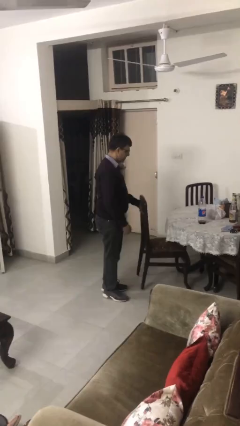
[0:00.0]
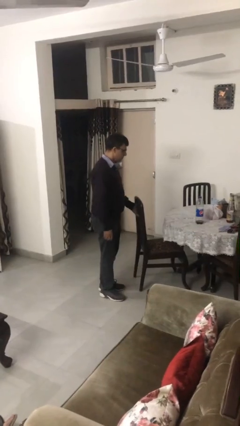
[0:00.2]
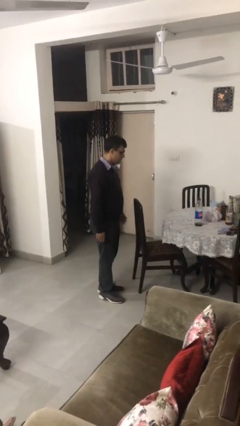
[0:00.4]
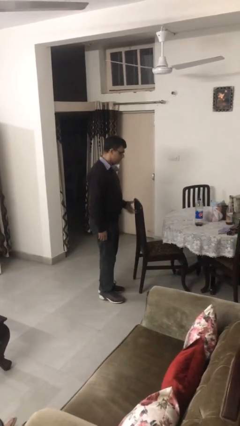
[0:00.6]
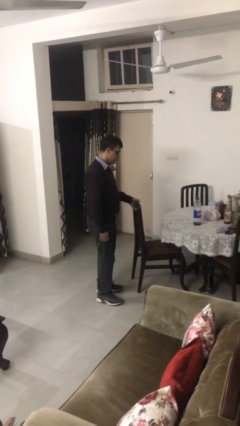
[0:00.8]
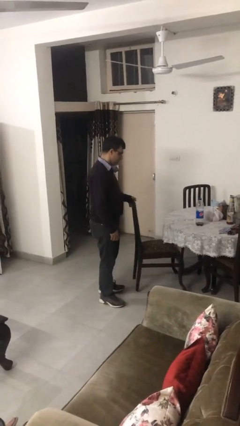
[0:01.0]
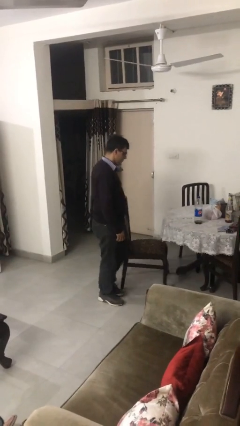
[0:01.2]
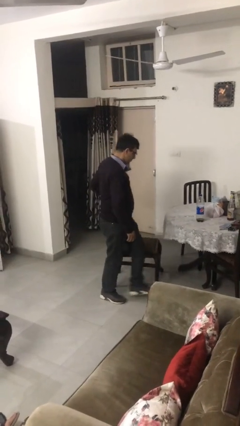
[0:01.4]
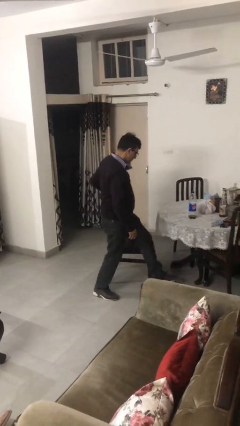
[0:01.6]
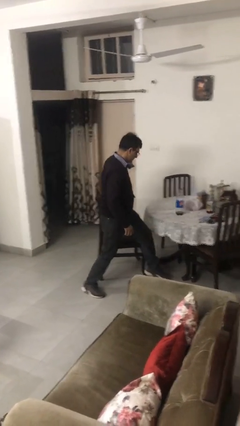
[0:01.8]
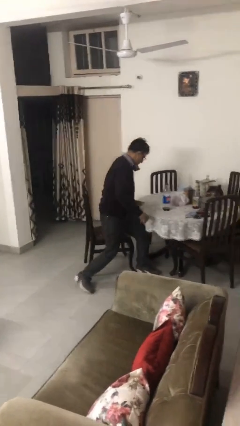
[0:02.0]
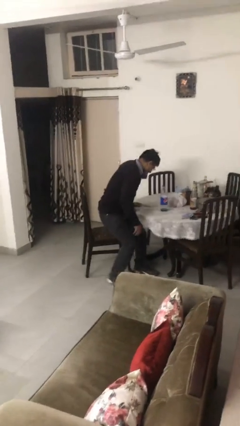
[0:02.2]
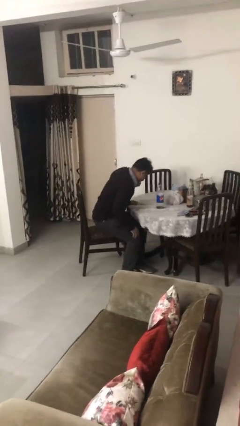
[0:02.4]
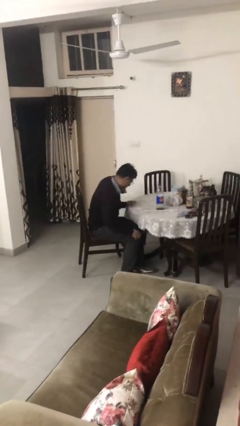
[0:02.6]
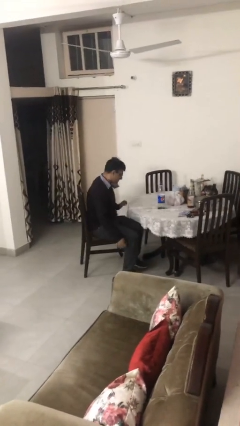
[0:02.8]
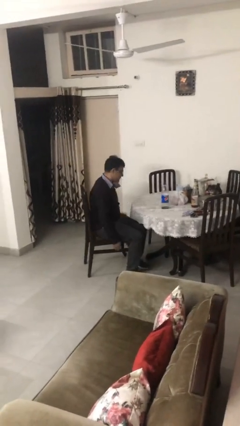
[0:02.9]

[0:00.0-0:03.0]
person sits down

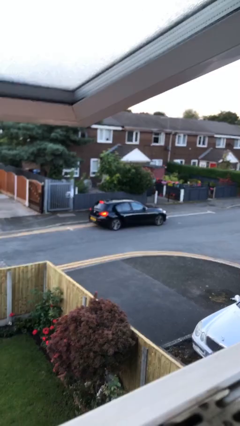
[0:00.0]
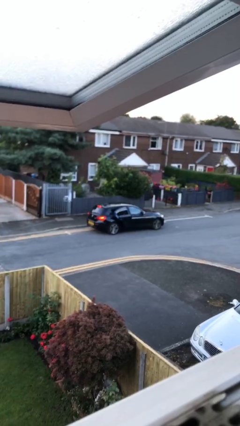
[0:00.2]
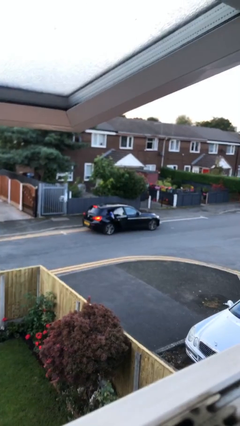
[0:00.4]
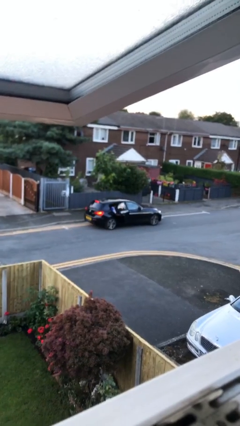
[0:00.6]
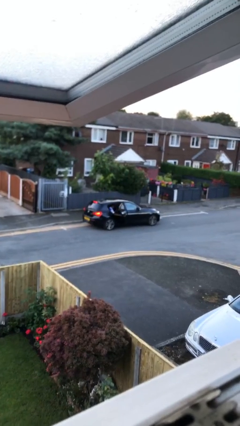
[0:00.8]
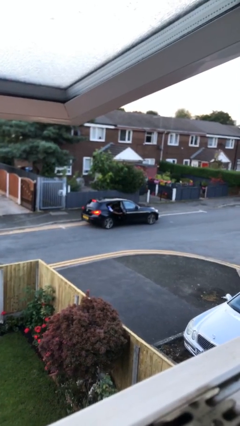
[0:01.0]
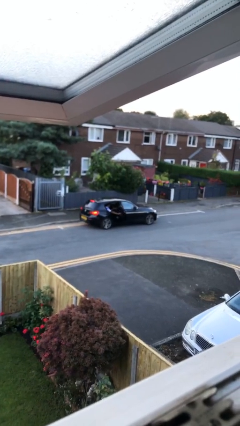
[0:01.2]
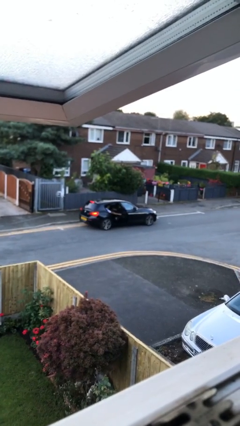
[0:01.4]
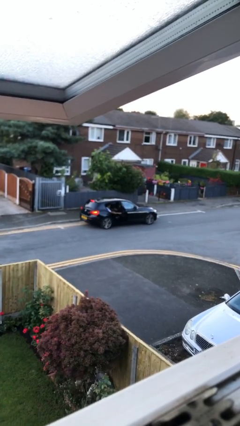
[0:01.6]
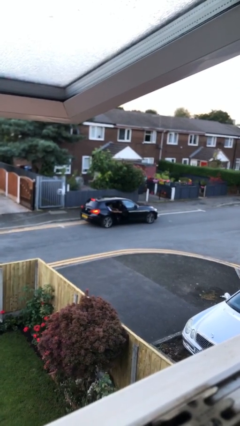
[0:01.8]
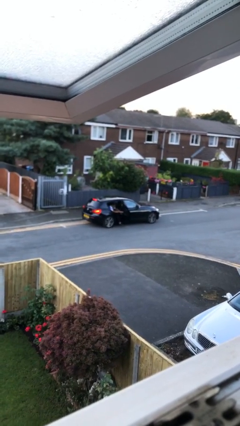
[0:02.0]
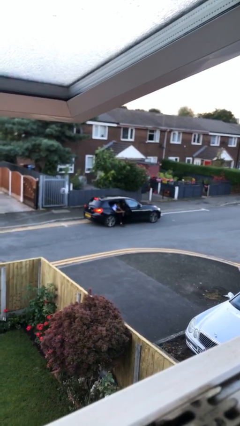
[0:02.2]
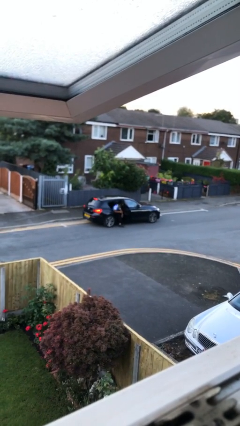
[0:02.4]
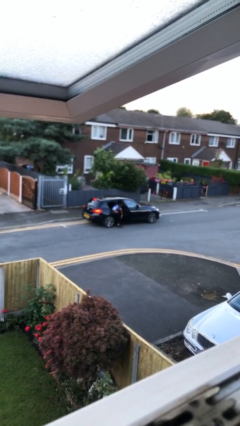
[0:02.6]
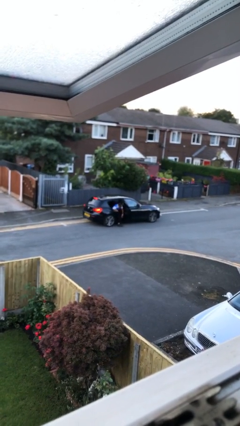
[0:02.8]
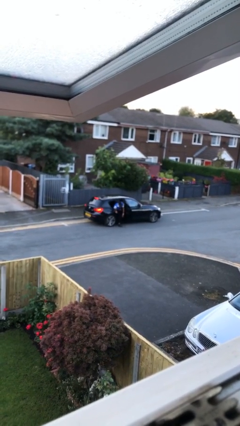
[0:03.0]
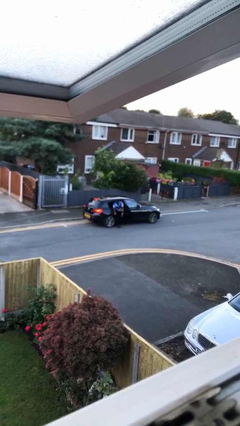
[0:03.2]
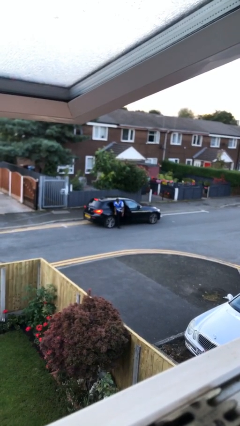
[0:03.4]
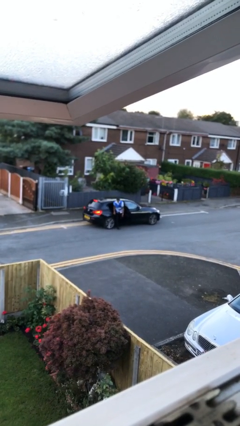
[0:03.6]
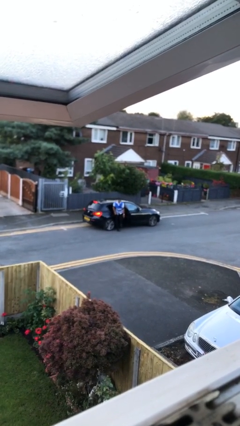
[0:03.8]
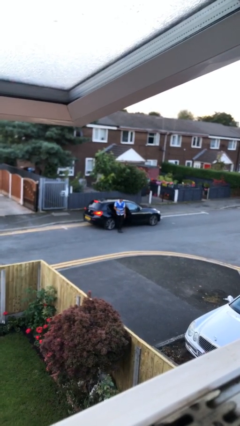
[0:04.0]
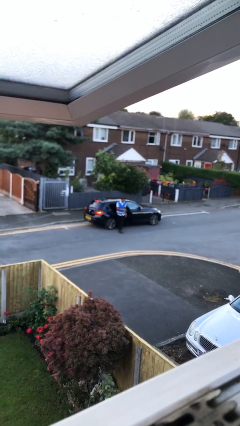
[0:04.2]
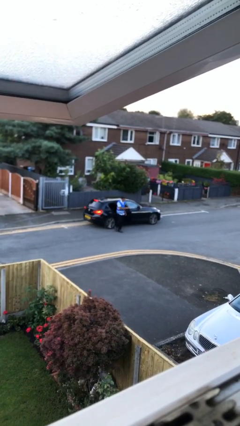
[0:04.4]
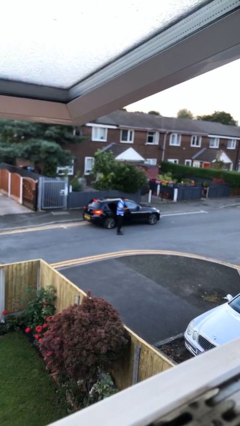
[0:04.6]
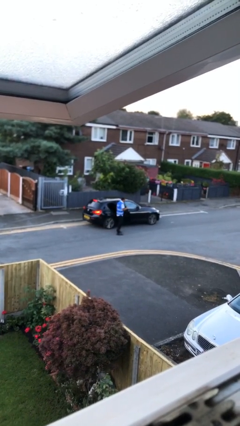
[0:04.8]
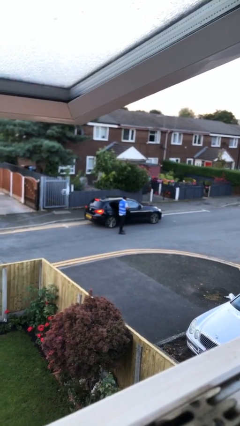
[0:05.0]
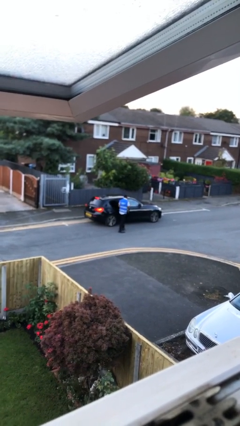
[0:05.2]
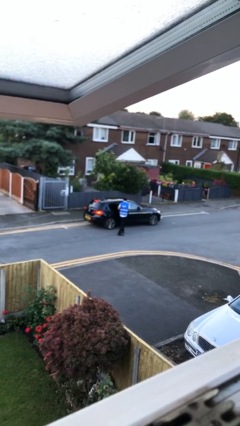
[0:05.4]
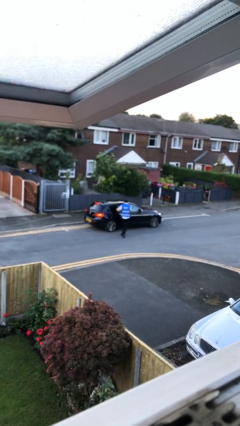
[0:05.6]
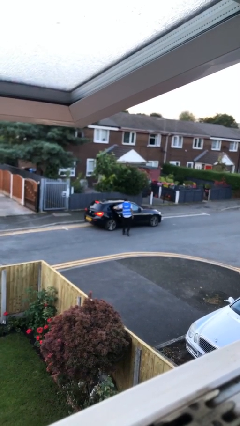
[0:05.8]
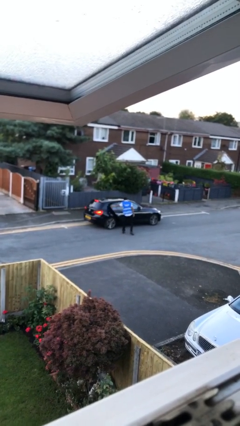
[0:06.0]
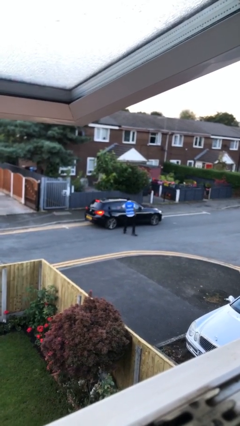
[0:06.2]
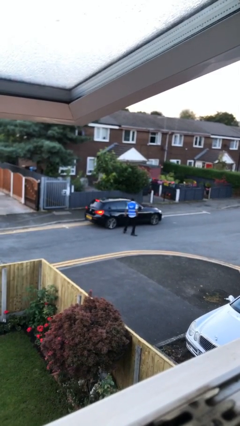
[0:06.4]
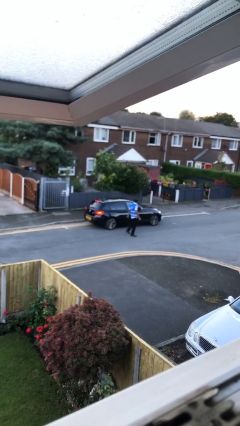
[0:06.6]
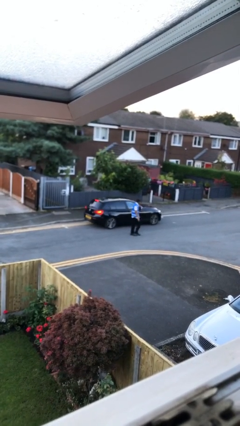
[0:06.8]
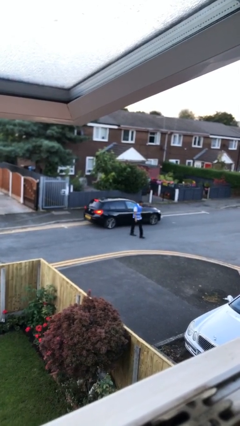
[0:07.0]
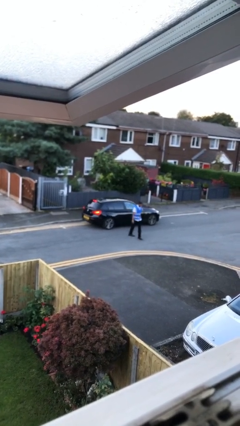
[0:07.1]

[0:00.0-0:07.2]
car drops off person

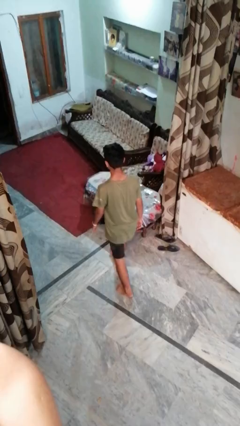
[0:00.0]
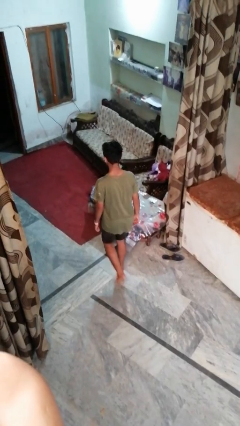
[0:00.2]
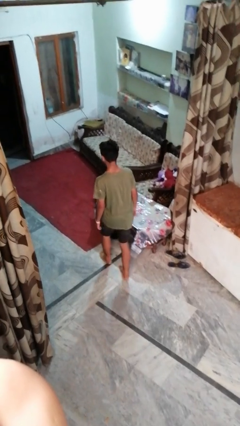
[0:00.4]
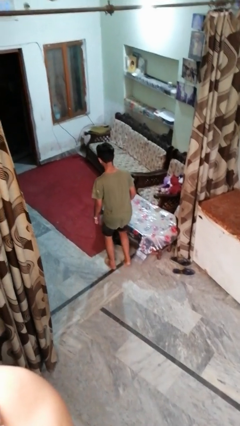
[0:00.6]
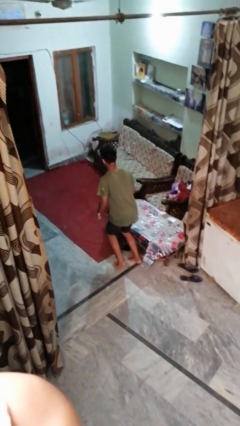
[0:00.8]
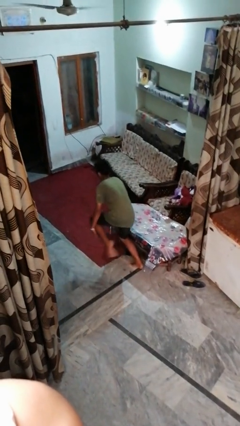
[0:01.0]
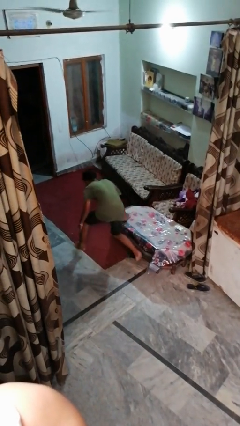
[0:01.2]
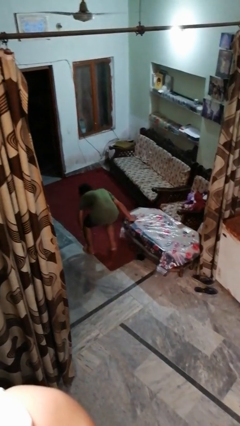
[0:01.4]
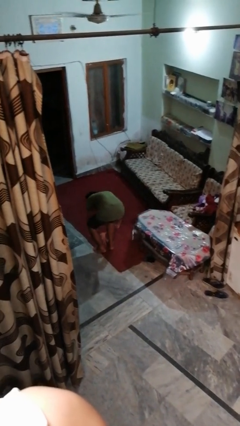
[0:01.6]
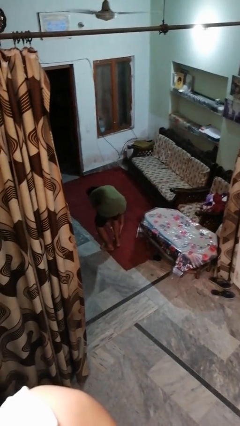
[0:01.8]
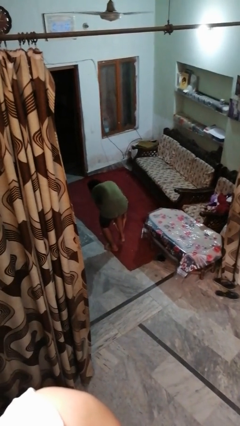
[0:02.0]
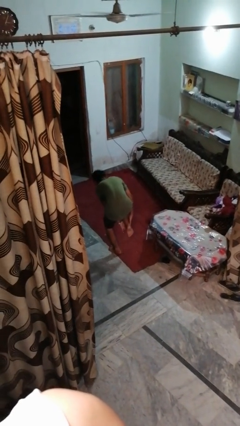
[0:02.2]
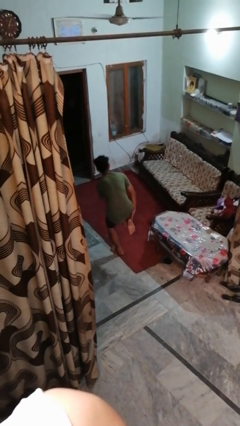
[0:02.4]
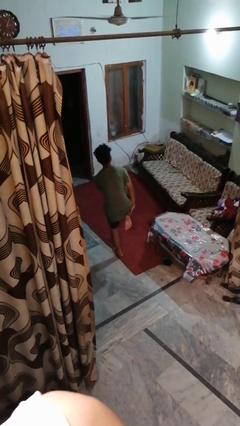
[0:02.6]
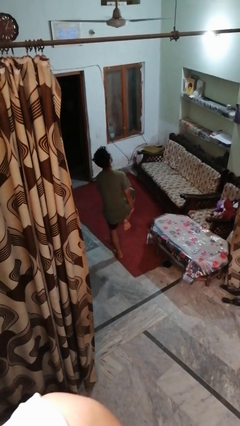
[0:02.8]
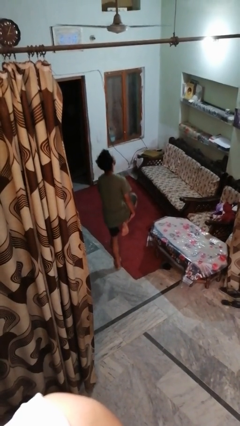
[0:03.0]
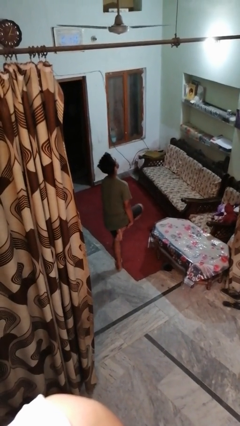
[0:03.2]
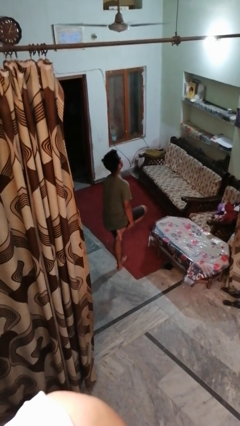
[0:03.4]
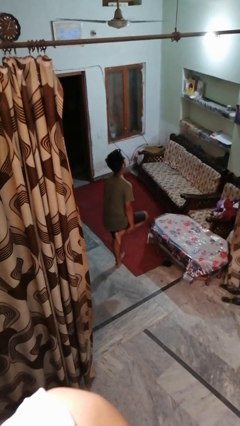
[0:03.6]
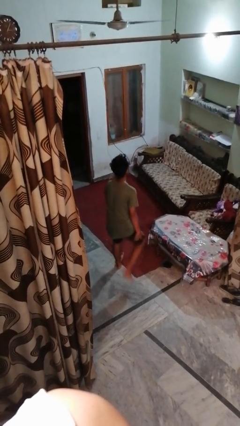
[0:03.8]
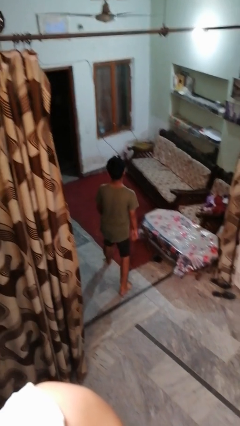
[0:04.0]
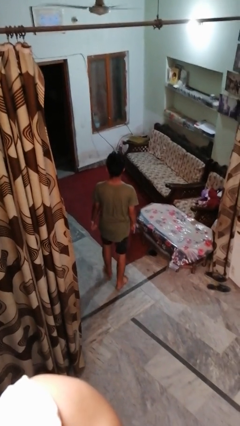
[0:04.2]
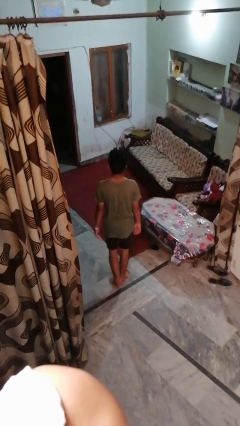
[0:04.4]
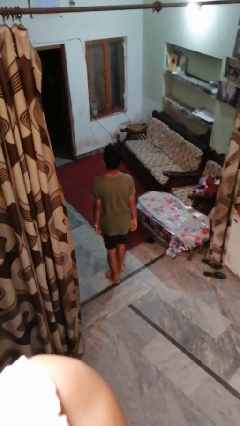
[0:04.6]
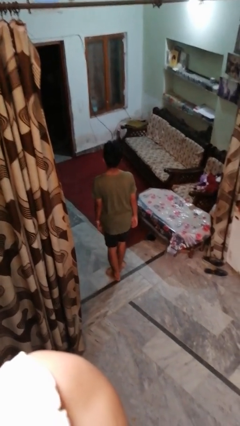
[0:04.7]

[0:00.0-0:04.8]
person stubs toe

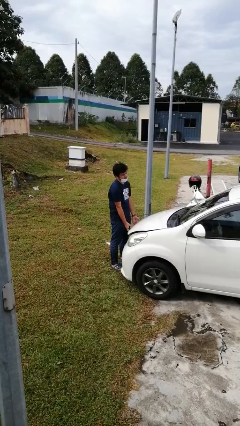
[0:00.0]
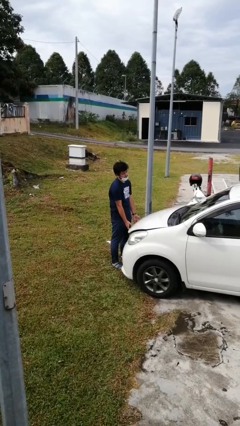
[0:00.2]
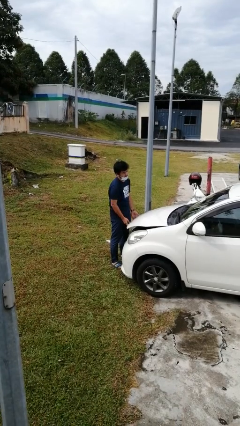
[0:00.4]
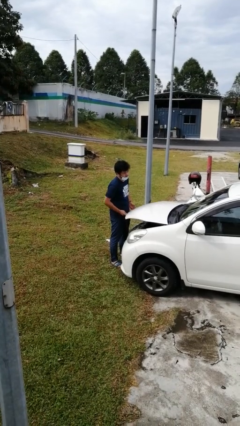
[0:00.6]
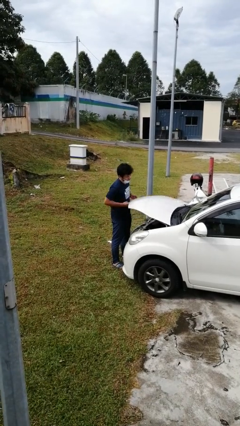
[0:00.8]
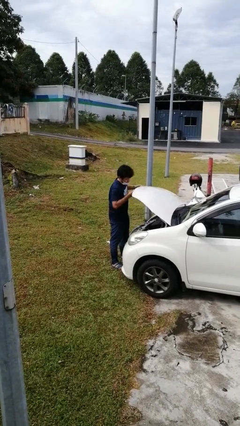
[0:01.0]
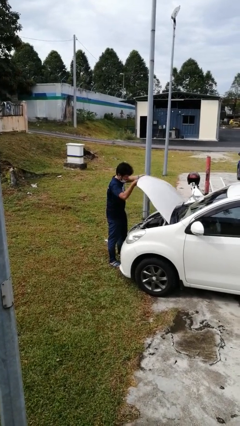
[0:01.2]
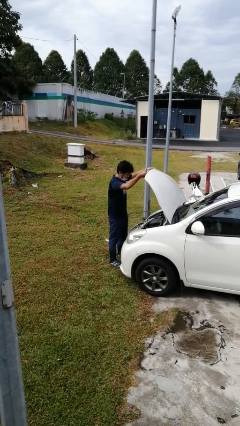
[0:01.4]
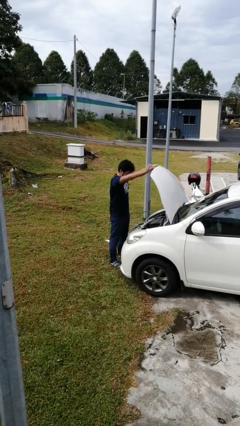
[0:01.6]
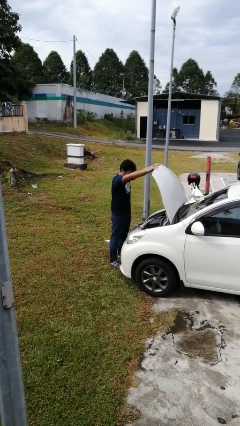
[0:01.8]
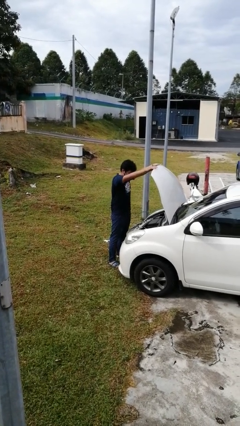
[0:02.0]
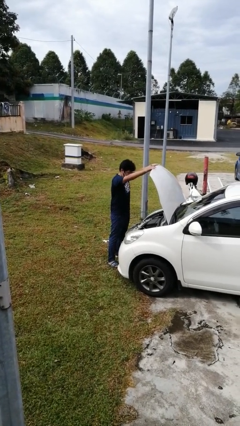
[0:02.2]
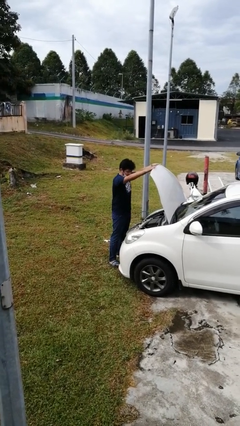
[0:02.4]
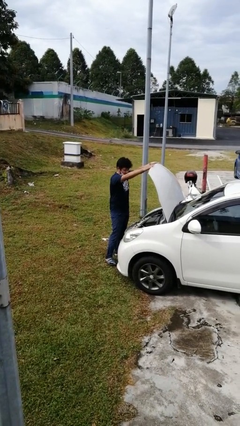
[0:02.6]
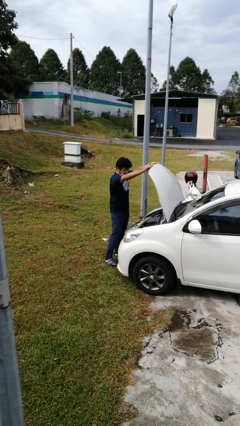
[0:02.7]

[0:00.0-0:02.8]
person opens car hood

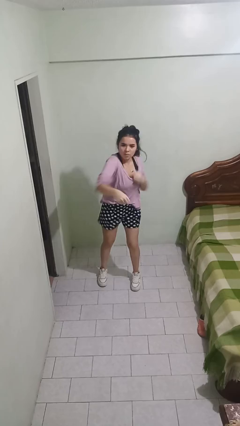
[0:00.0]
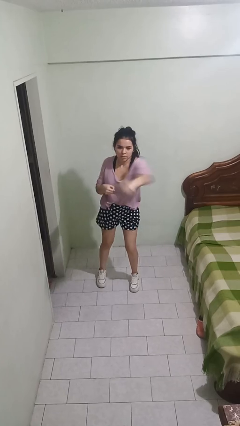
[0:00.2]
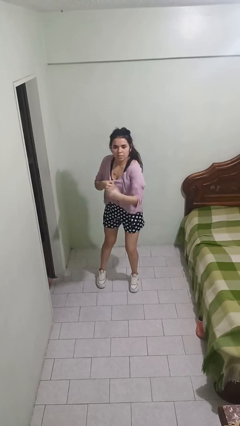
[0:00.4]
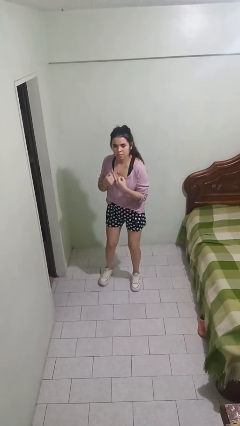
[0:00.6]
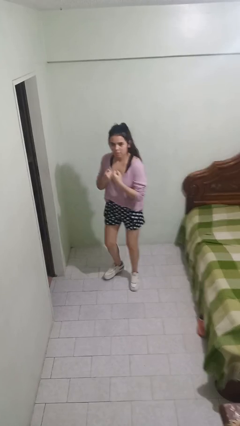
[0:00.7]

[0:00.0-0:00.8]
person karate chop
